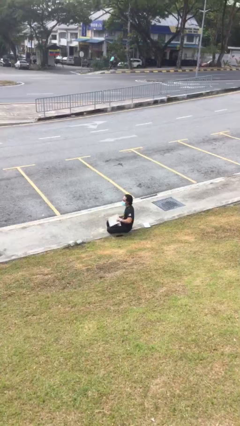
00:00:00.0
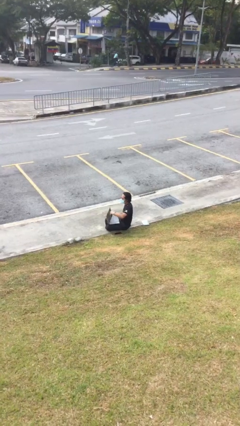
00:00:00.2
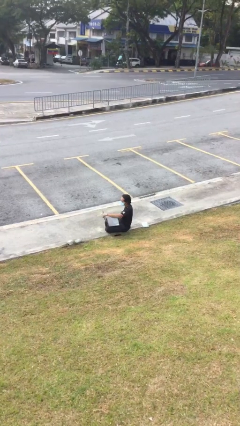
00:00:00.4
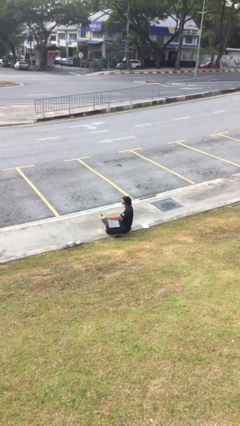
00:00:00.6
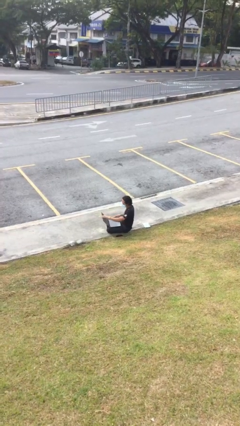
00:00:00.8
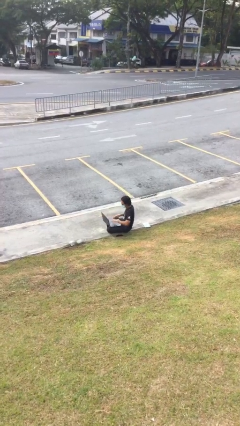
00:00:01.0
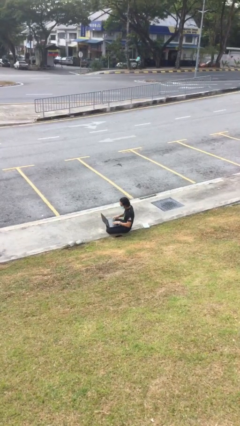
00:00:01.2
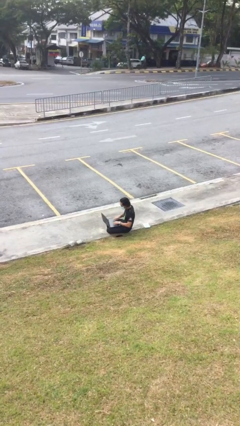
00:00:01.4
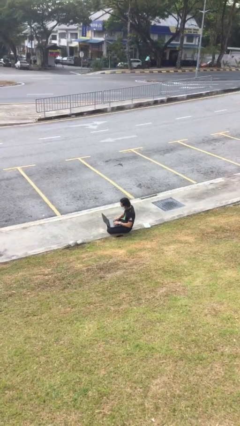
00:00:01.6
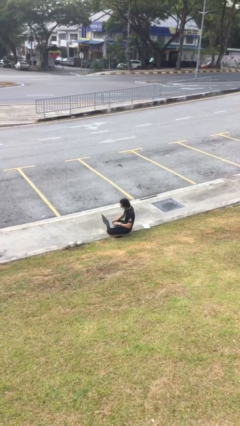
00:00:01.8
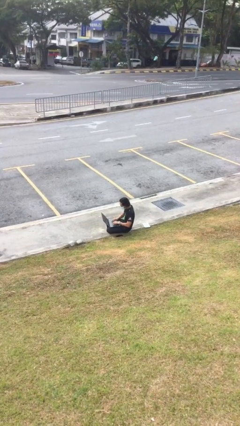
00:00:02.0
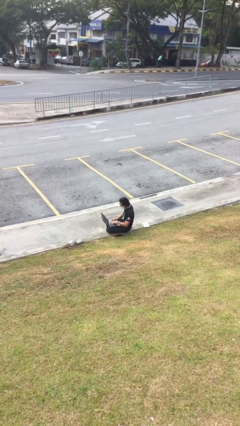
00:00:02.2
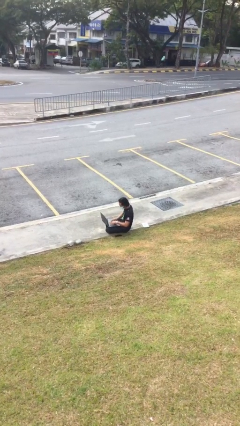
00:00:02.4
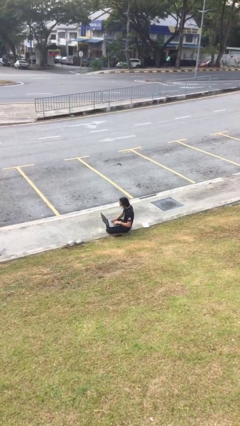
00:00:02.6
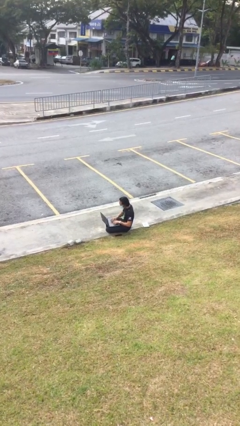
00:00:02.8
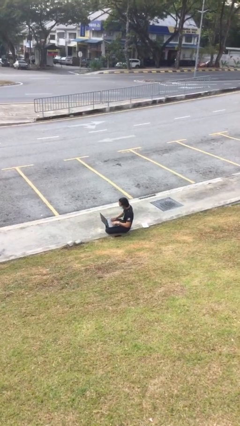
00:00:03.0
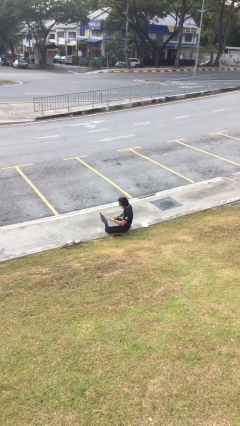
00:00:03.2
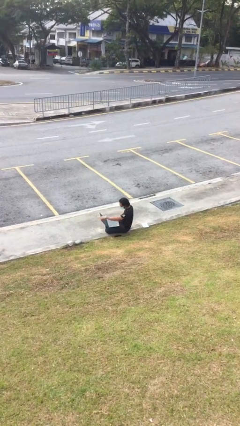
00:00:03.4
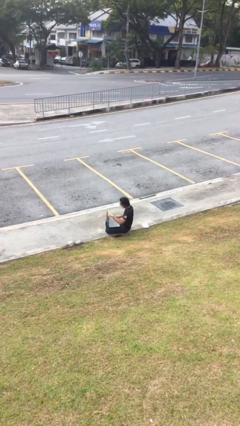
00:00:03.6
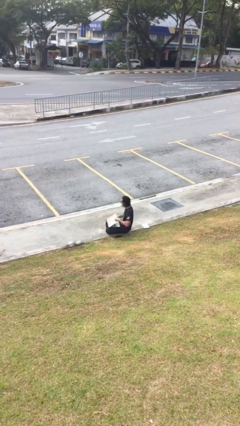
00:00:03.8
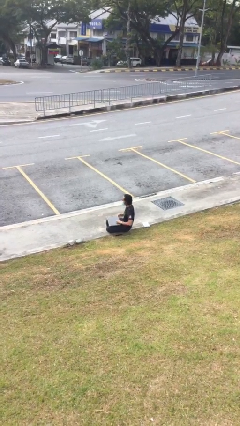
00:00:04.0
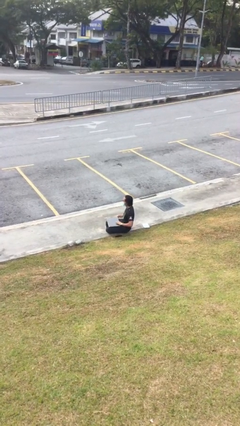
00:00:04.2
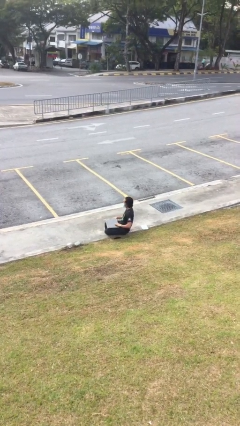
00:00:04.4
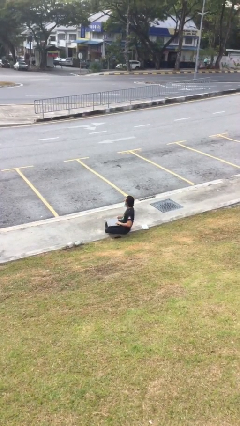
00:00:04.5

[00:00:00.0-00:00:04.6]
person interacts with laptop

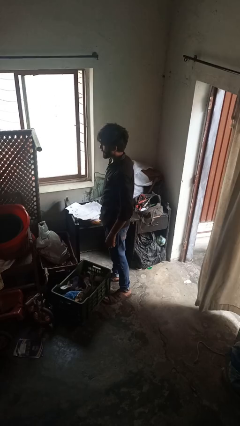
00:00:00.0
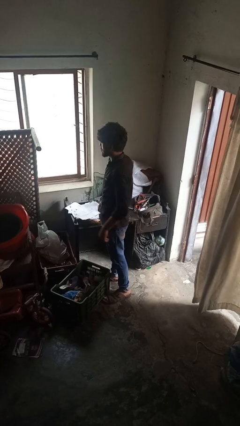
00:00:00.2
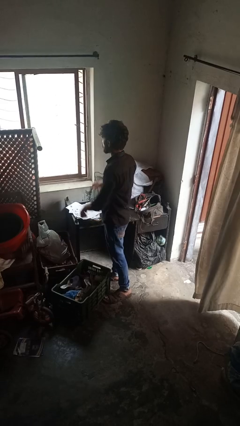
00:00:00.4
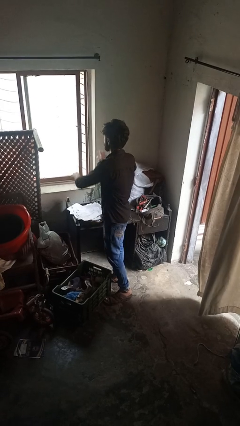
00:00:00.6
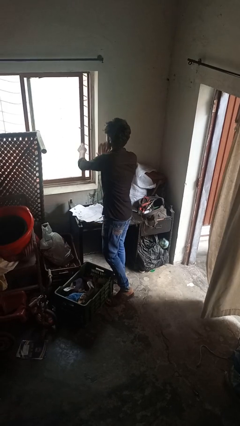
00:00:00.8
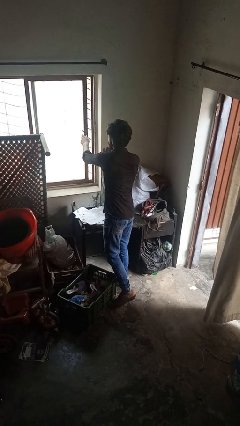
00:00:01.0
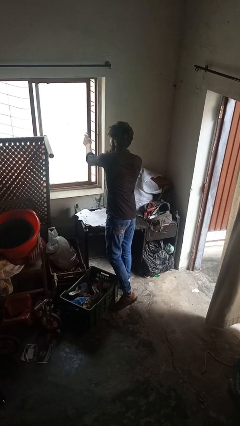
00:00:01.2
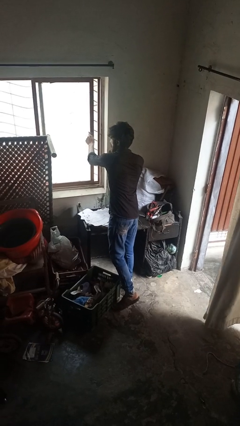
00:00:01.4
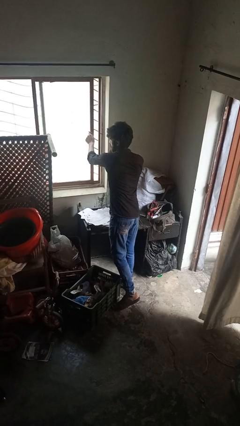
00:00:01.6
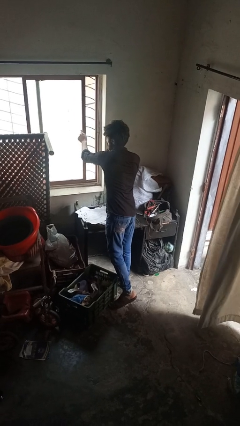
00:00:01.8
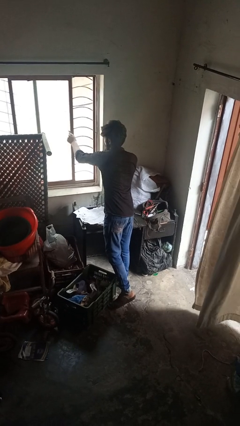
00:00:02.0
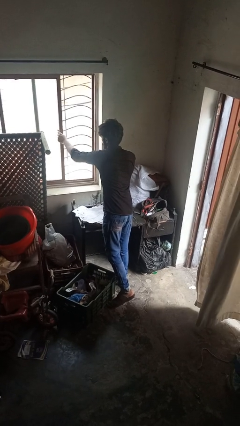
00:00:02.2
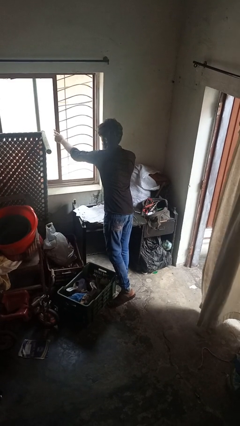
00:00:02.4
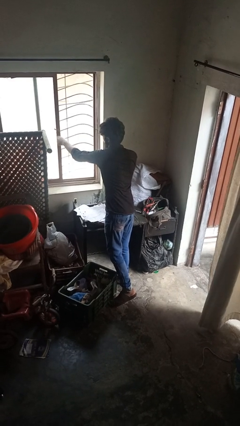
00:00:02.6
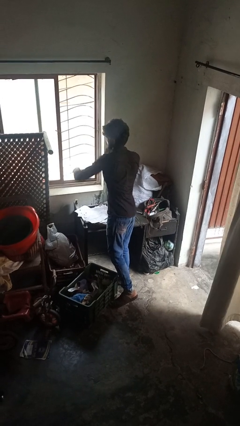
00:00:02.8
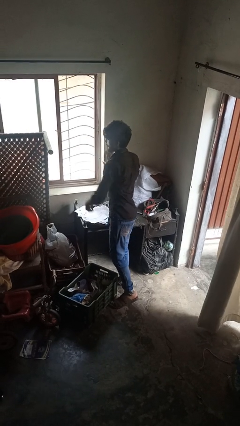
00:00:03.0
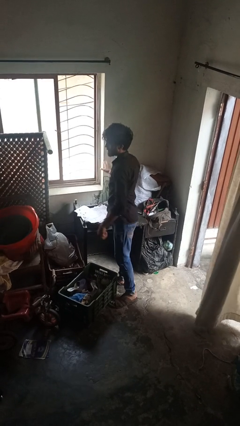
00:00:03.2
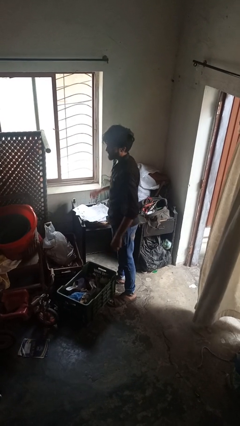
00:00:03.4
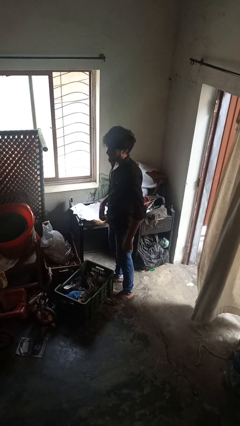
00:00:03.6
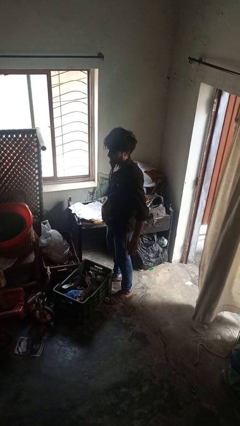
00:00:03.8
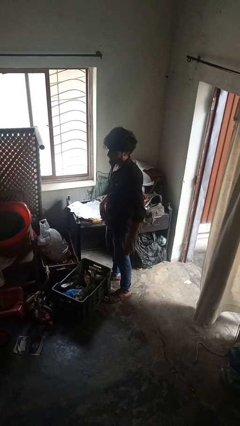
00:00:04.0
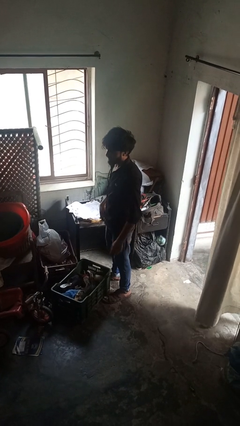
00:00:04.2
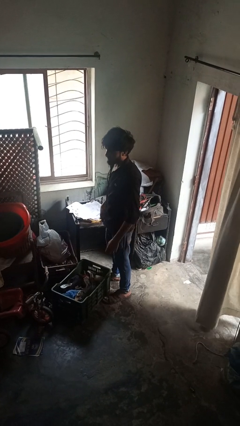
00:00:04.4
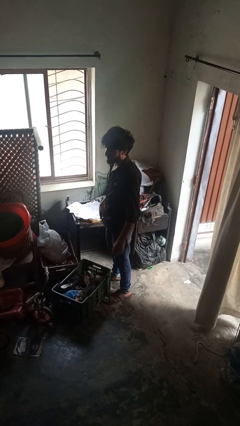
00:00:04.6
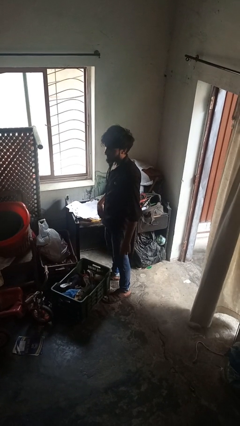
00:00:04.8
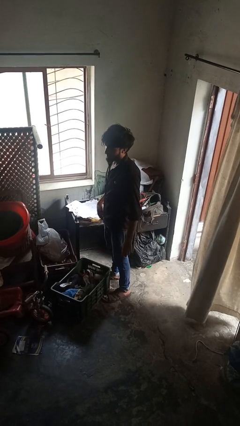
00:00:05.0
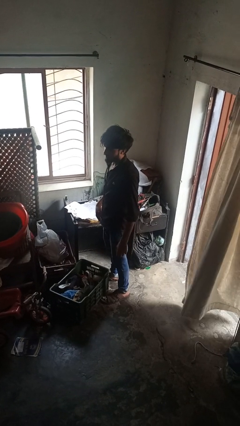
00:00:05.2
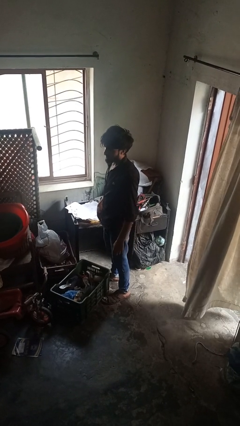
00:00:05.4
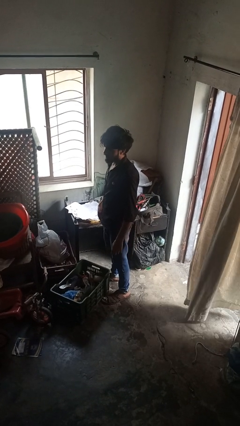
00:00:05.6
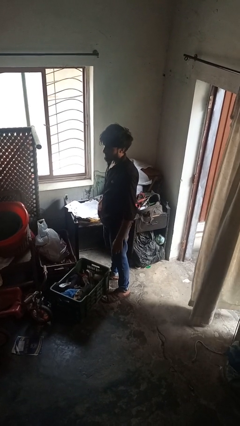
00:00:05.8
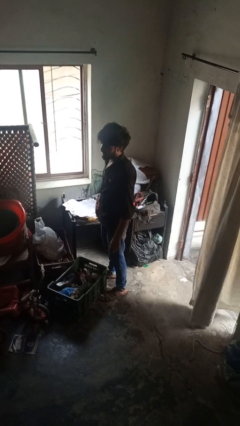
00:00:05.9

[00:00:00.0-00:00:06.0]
person opens home window

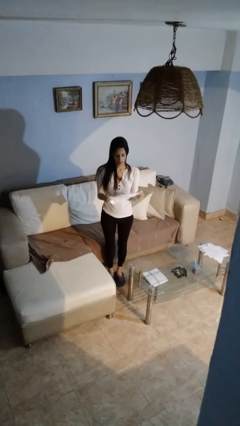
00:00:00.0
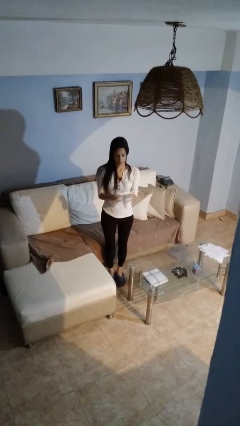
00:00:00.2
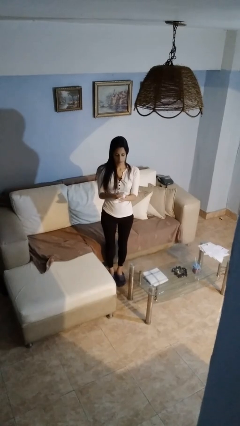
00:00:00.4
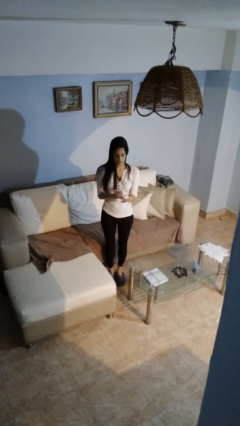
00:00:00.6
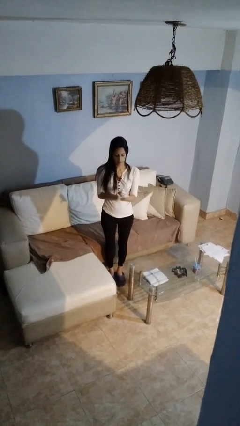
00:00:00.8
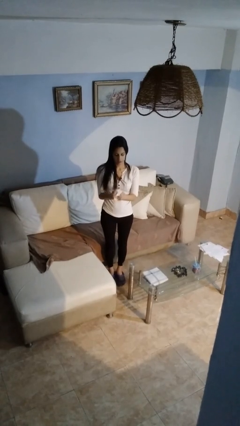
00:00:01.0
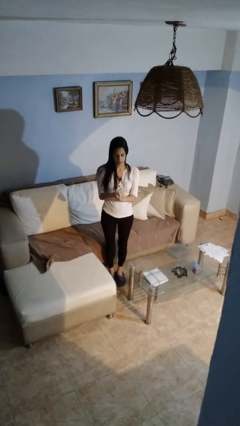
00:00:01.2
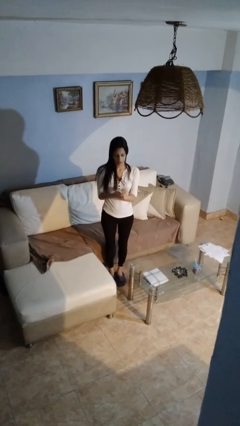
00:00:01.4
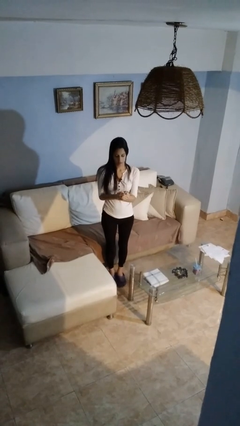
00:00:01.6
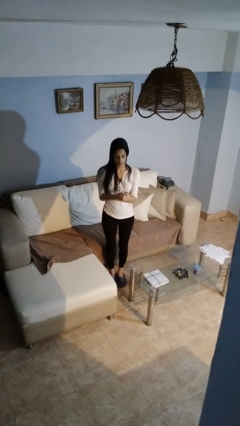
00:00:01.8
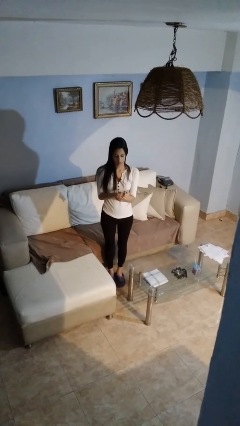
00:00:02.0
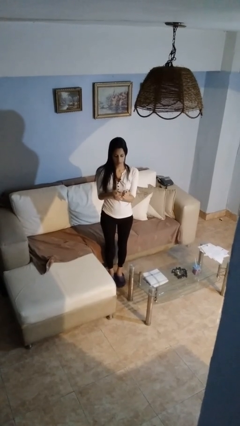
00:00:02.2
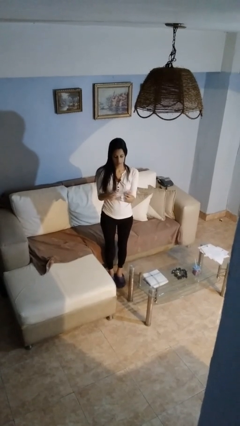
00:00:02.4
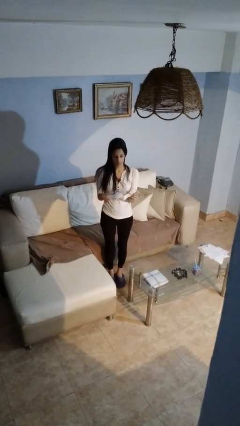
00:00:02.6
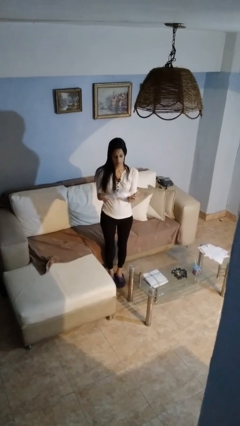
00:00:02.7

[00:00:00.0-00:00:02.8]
person crumples paper

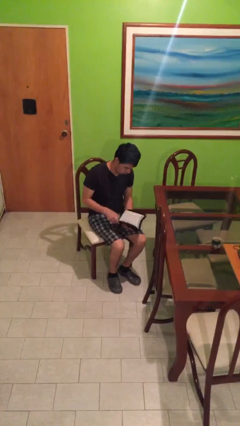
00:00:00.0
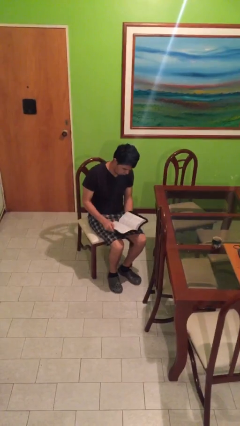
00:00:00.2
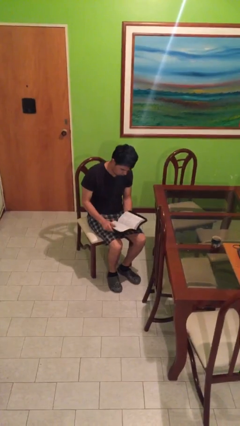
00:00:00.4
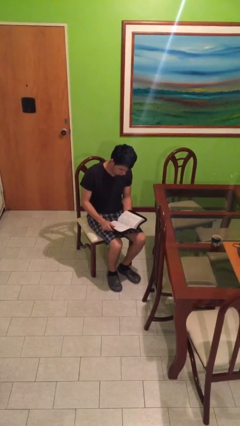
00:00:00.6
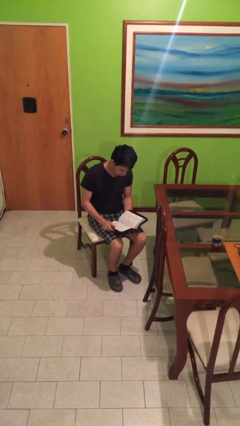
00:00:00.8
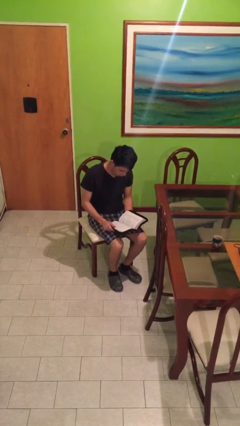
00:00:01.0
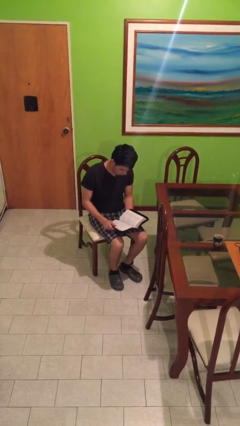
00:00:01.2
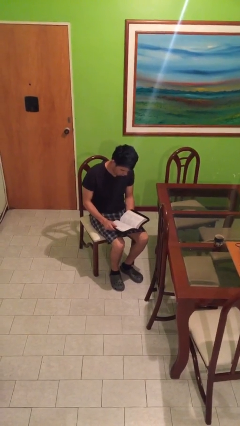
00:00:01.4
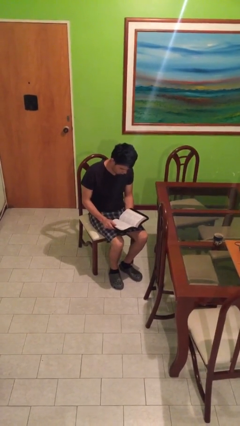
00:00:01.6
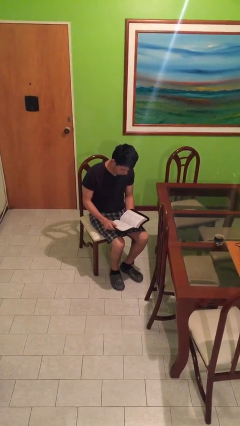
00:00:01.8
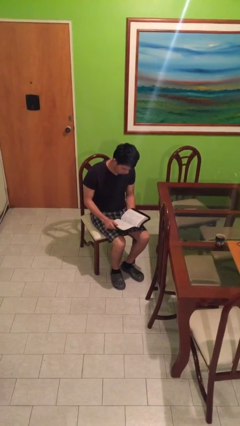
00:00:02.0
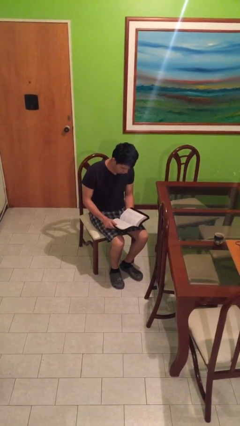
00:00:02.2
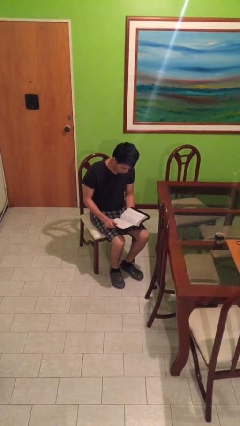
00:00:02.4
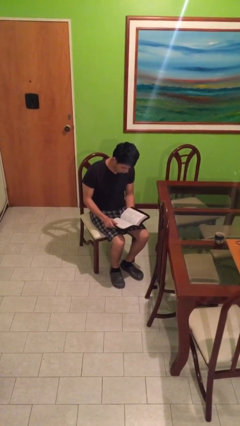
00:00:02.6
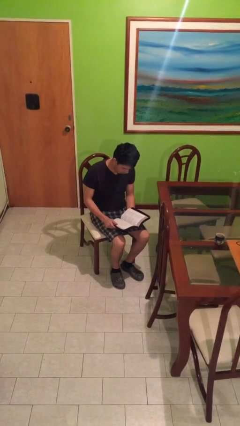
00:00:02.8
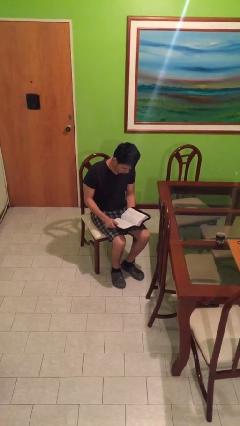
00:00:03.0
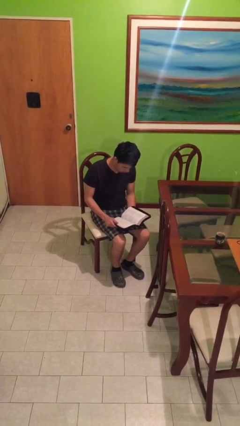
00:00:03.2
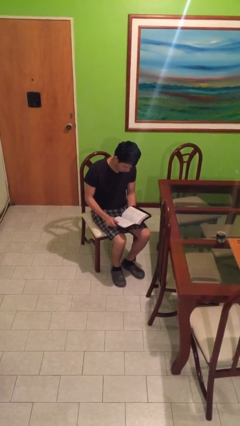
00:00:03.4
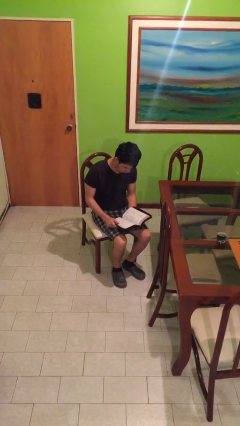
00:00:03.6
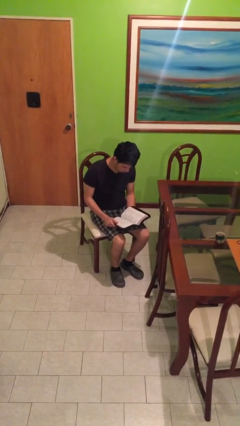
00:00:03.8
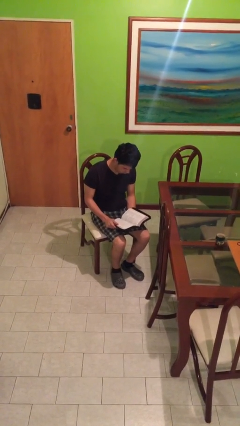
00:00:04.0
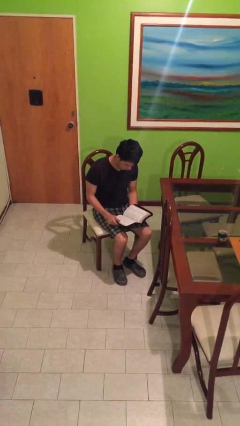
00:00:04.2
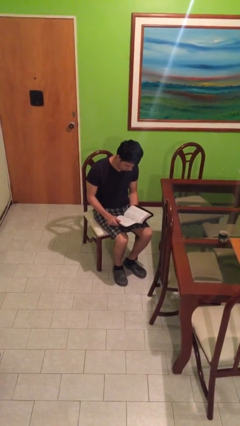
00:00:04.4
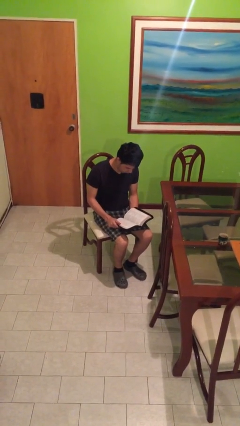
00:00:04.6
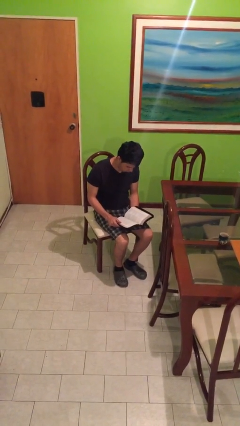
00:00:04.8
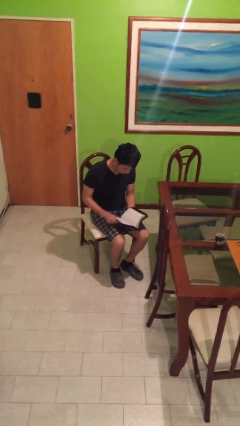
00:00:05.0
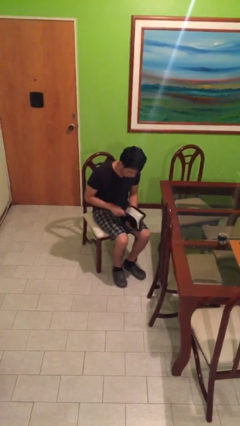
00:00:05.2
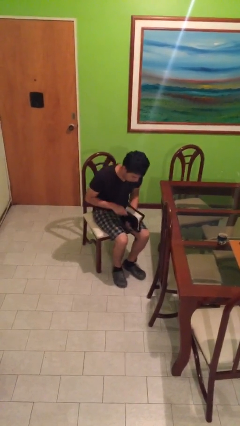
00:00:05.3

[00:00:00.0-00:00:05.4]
person reads document
